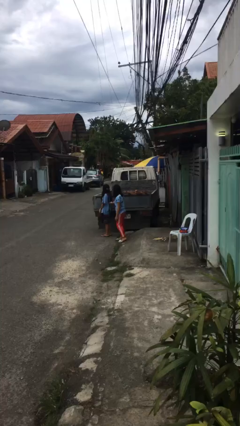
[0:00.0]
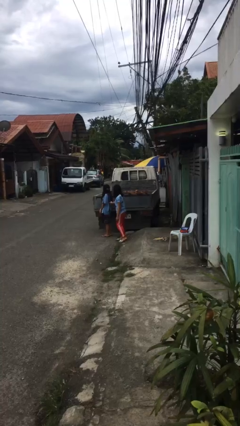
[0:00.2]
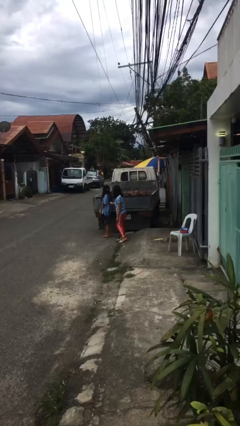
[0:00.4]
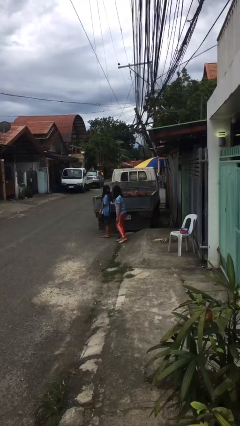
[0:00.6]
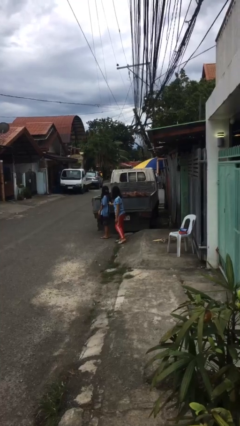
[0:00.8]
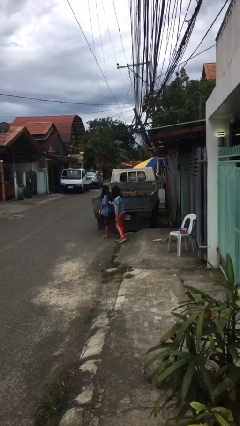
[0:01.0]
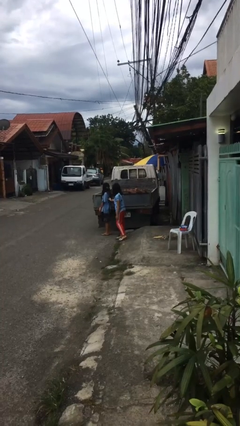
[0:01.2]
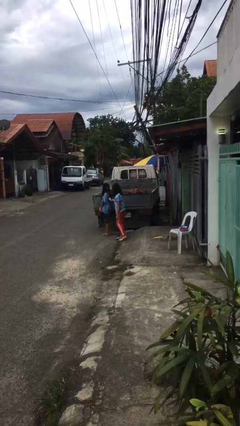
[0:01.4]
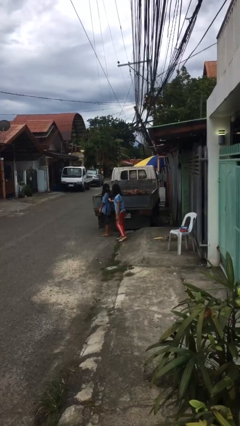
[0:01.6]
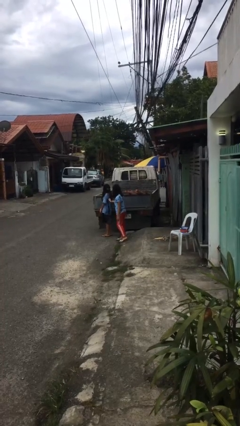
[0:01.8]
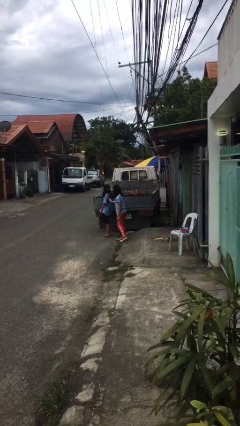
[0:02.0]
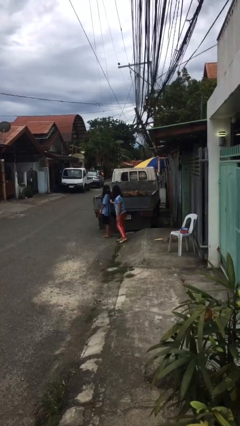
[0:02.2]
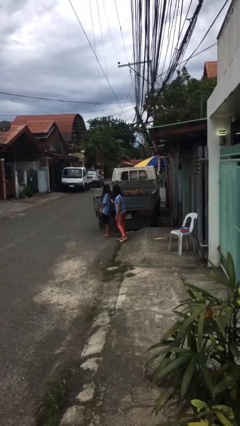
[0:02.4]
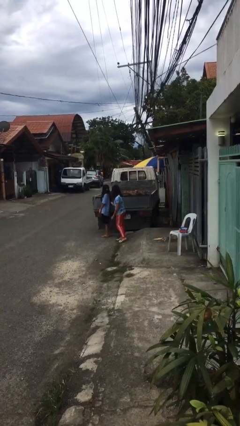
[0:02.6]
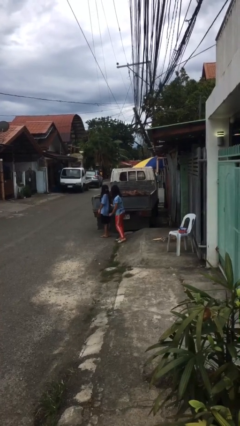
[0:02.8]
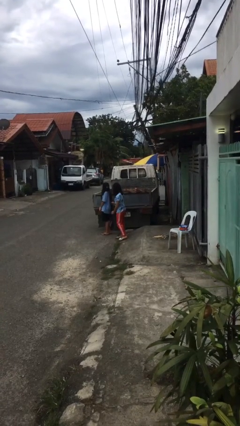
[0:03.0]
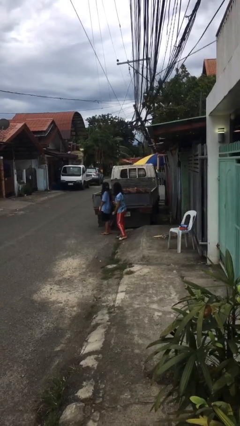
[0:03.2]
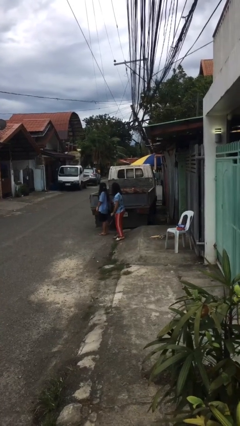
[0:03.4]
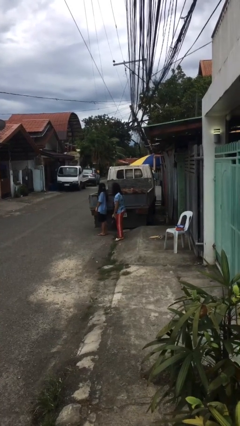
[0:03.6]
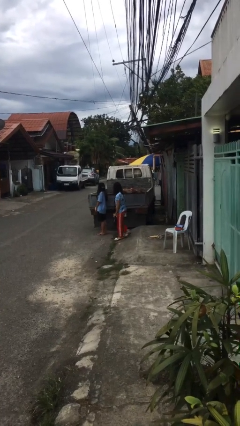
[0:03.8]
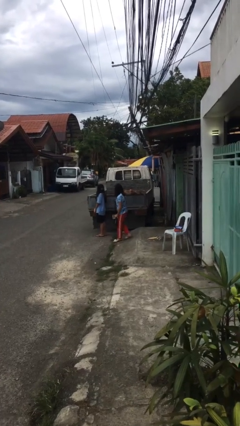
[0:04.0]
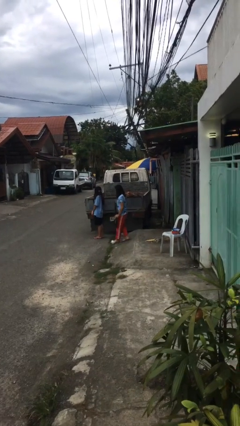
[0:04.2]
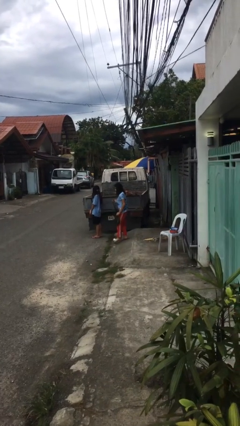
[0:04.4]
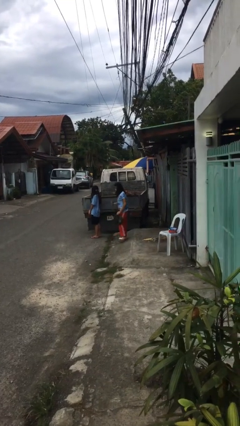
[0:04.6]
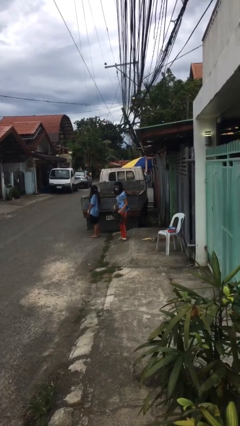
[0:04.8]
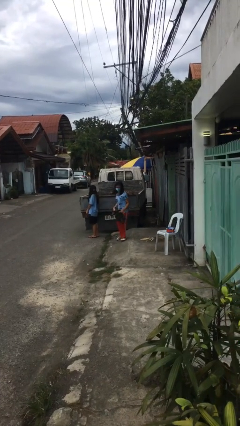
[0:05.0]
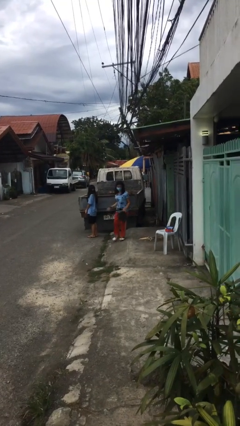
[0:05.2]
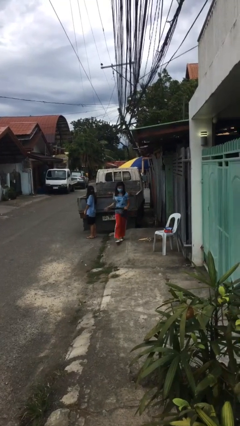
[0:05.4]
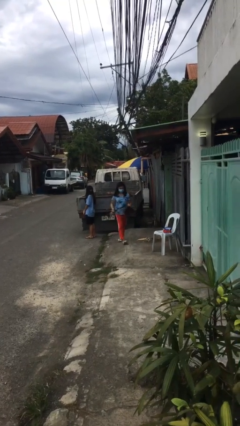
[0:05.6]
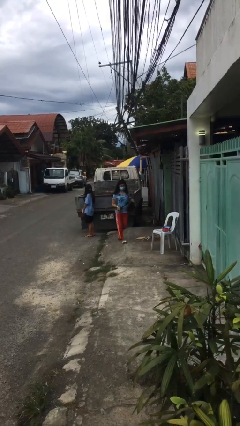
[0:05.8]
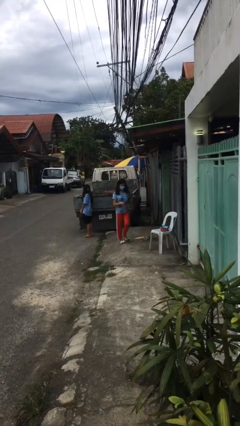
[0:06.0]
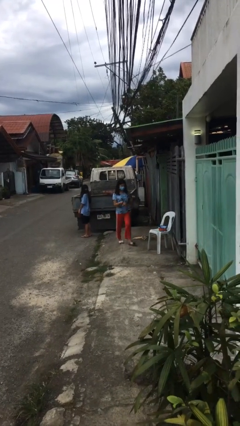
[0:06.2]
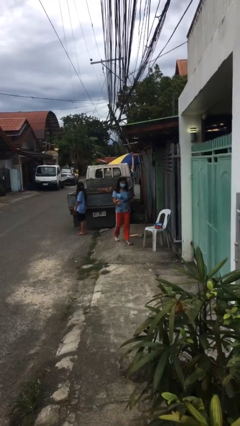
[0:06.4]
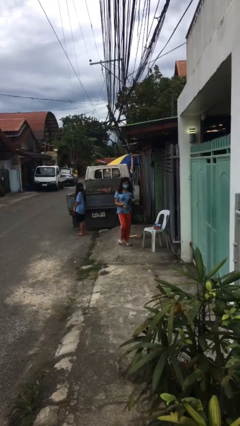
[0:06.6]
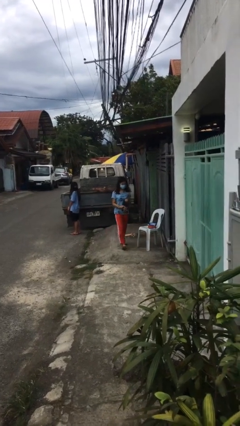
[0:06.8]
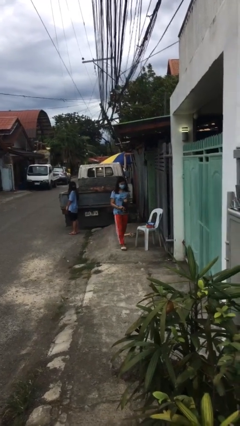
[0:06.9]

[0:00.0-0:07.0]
person steals object from person

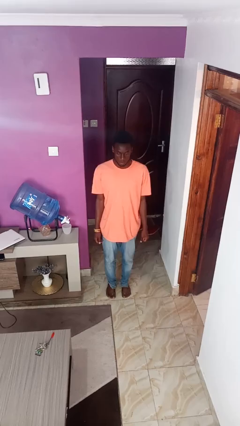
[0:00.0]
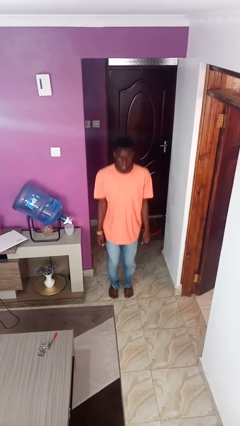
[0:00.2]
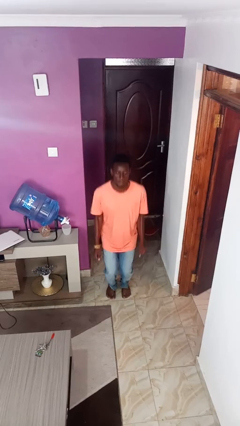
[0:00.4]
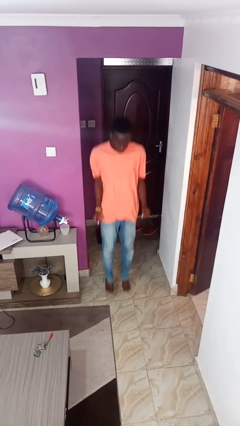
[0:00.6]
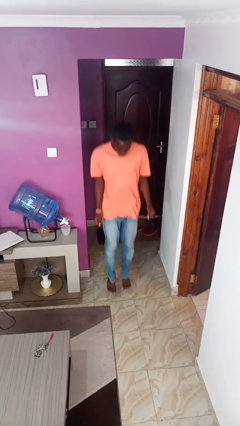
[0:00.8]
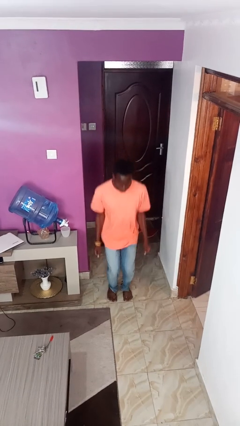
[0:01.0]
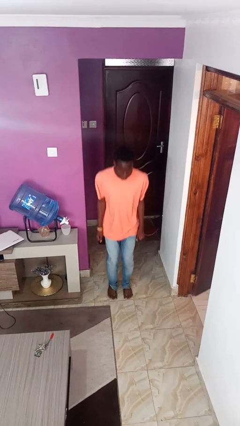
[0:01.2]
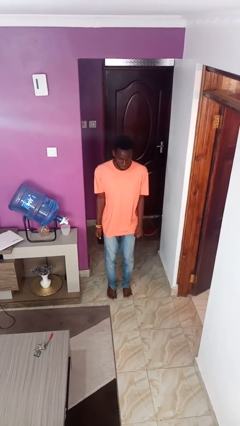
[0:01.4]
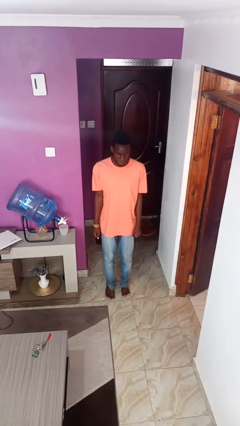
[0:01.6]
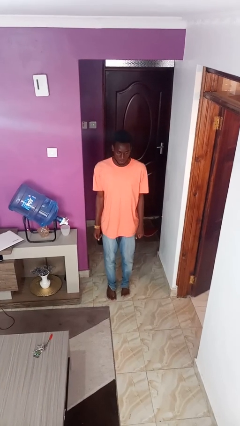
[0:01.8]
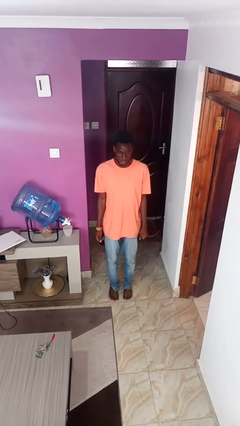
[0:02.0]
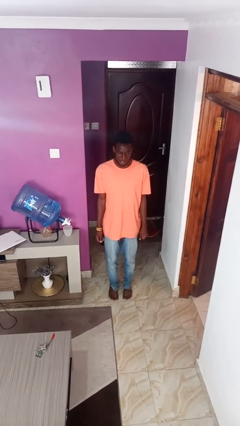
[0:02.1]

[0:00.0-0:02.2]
person jumps

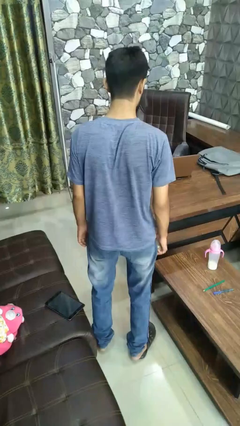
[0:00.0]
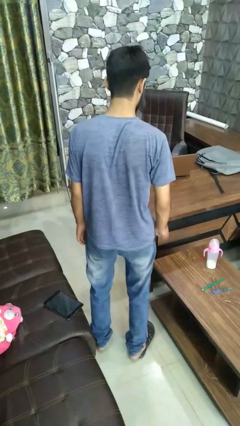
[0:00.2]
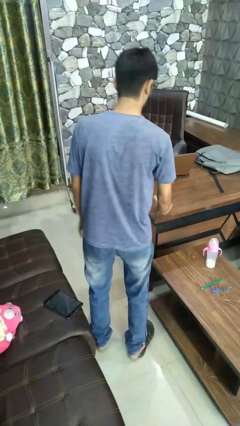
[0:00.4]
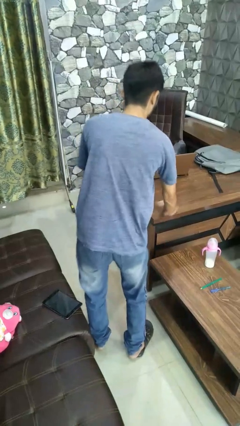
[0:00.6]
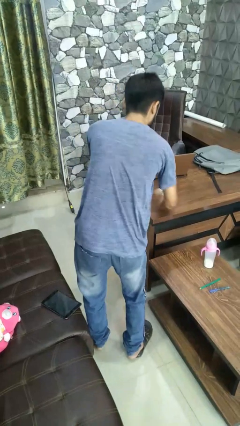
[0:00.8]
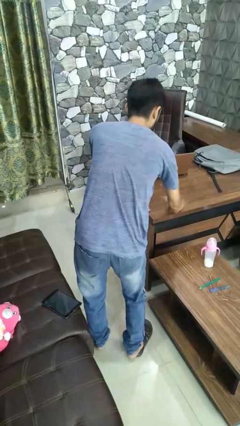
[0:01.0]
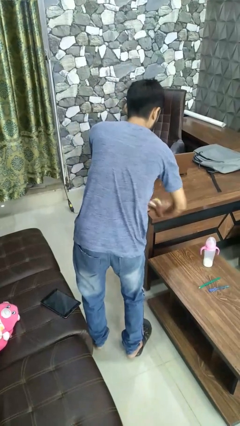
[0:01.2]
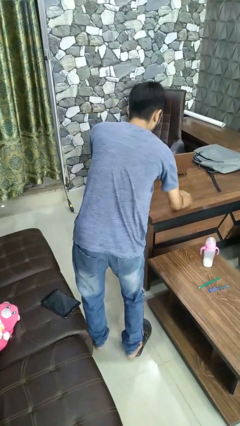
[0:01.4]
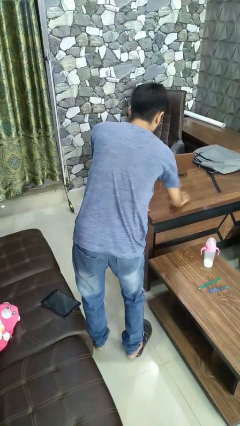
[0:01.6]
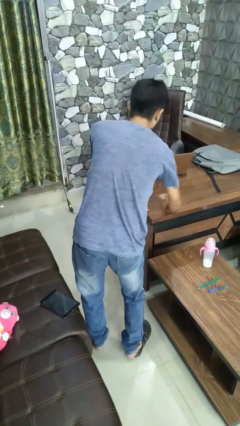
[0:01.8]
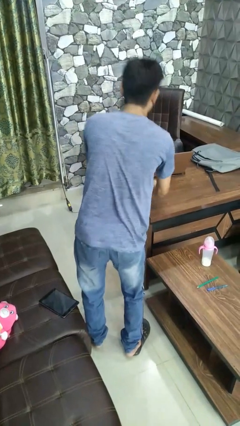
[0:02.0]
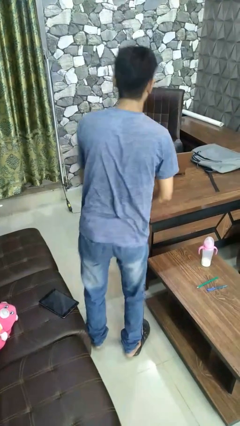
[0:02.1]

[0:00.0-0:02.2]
person dusts furniture

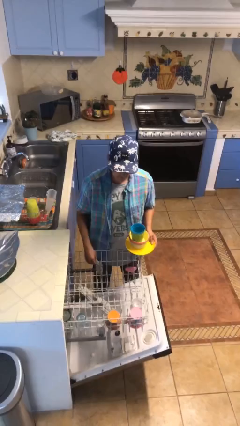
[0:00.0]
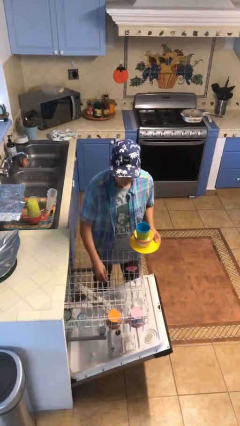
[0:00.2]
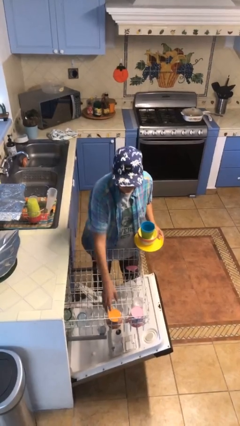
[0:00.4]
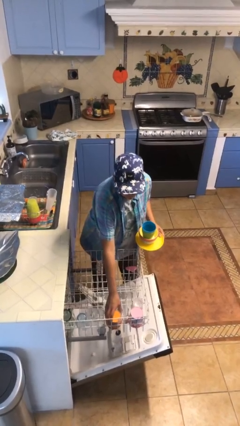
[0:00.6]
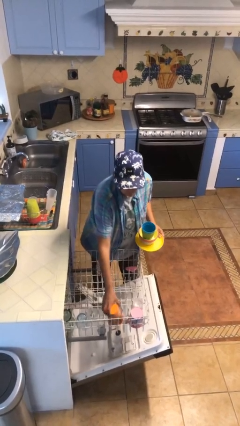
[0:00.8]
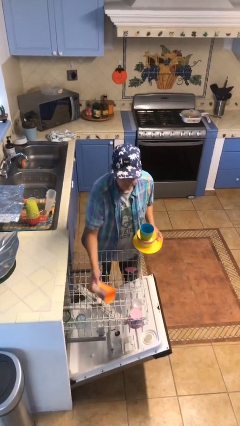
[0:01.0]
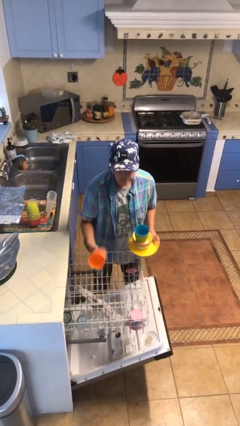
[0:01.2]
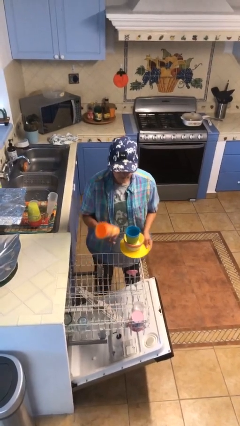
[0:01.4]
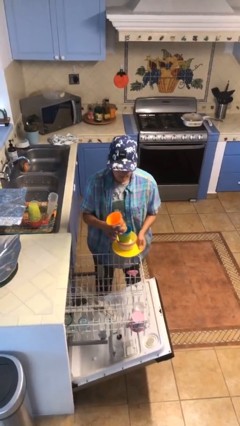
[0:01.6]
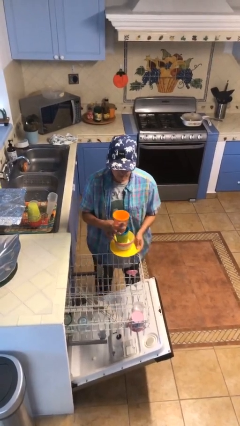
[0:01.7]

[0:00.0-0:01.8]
person unloads dishwasher

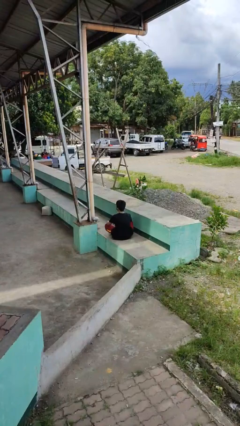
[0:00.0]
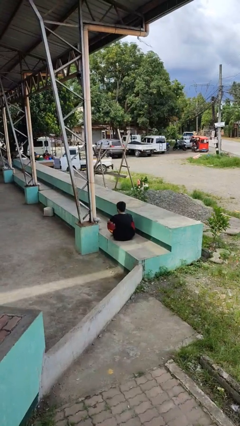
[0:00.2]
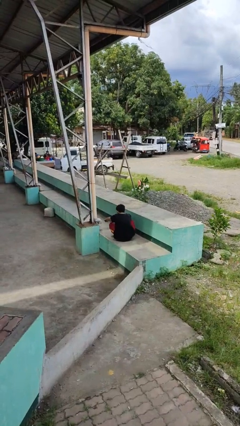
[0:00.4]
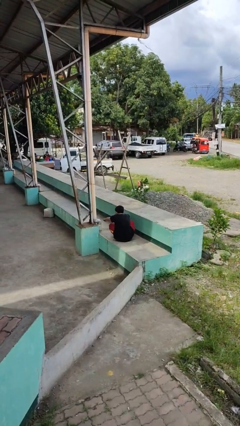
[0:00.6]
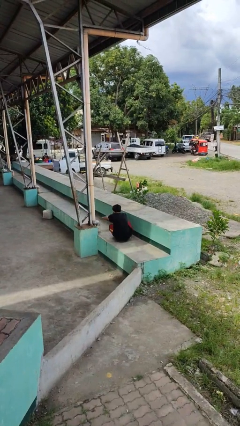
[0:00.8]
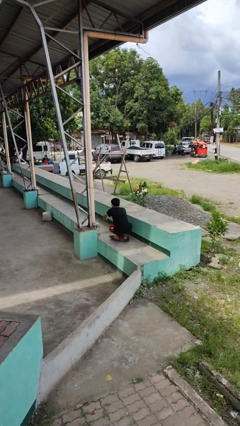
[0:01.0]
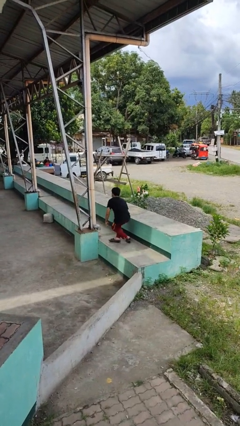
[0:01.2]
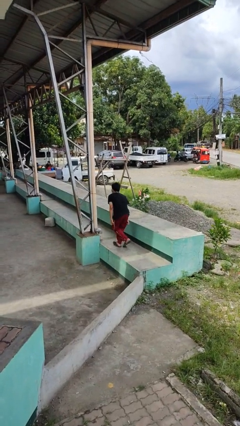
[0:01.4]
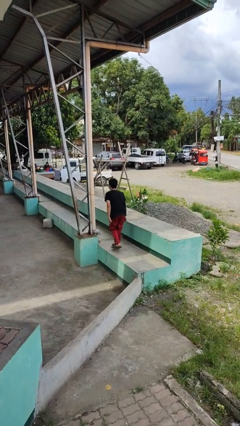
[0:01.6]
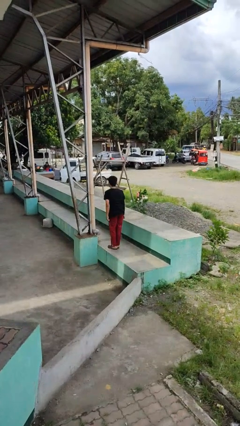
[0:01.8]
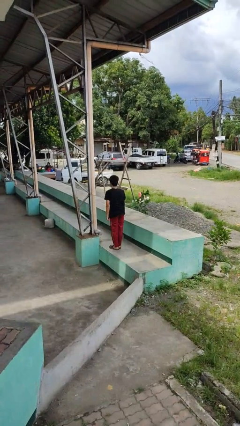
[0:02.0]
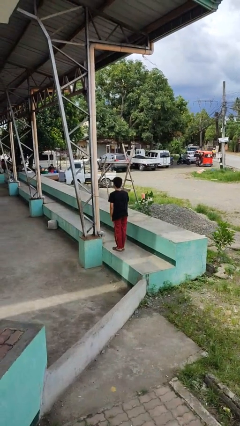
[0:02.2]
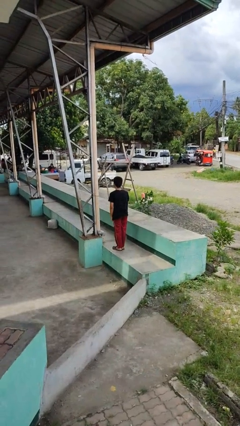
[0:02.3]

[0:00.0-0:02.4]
person stands up from floor

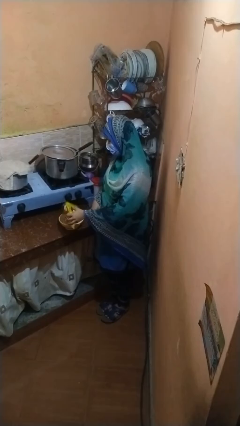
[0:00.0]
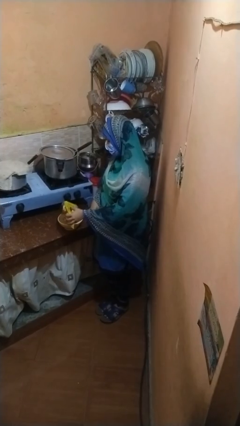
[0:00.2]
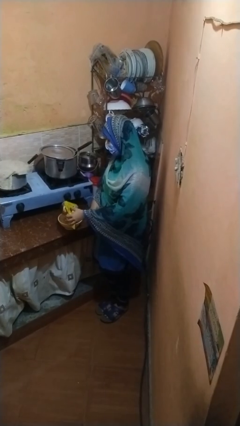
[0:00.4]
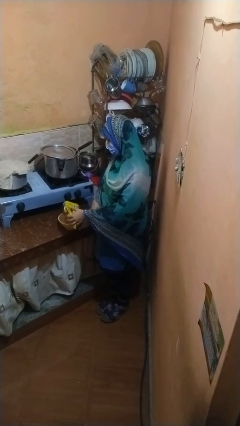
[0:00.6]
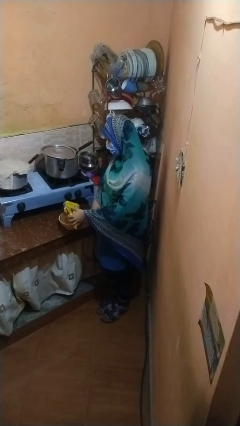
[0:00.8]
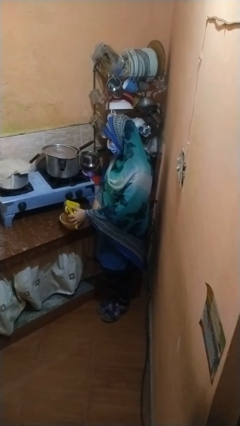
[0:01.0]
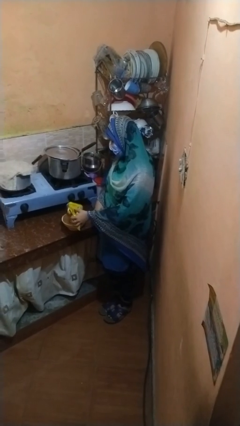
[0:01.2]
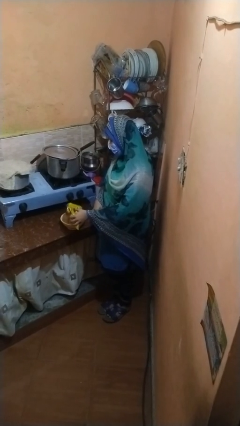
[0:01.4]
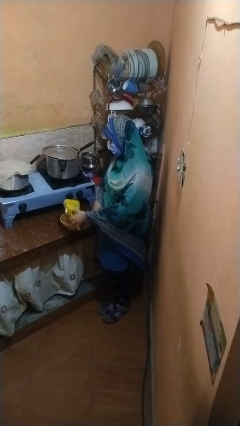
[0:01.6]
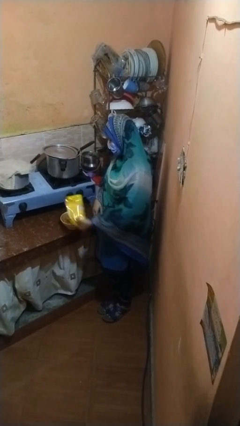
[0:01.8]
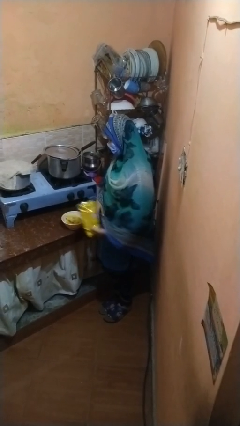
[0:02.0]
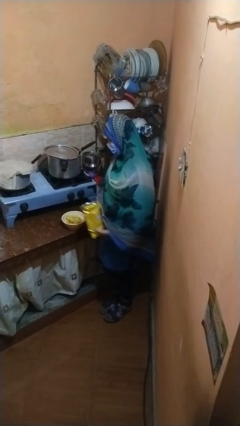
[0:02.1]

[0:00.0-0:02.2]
person pours into bowl
